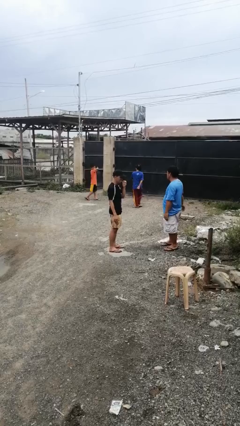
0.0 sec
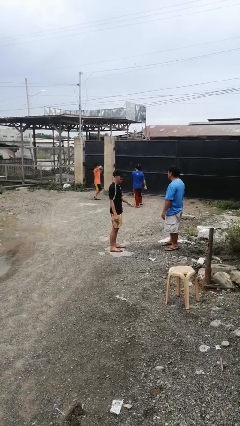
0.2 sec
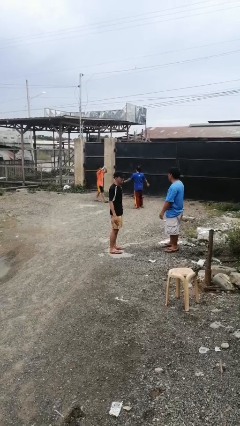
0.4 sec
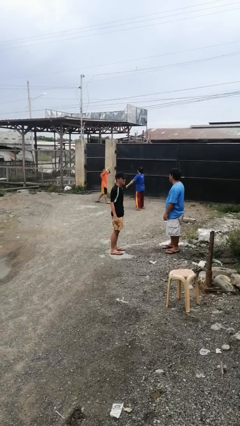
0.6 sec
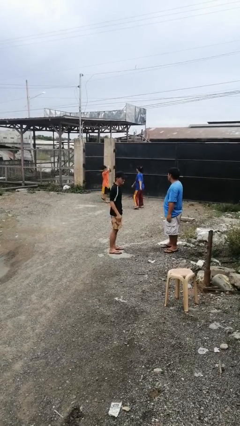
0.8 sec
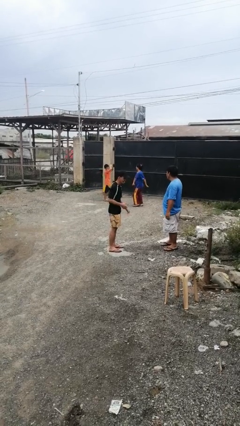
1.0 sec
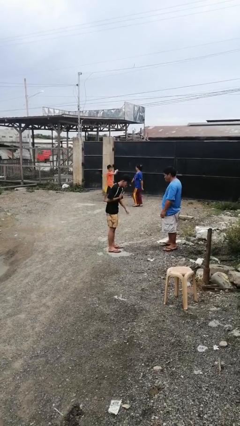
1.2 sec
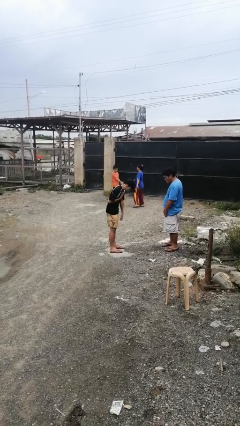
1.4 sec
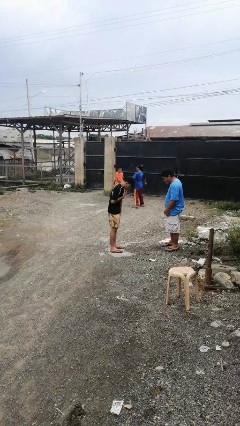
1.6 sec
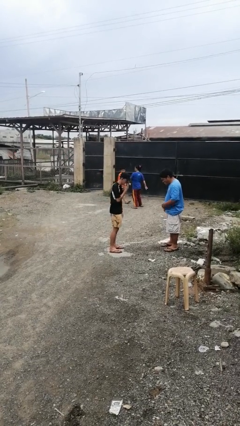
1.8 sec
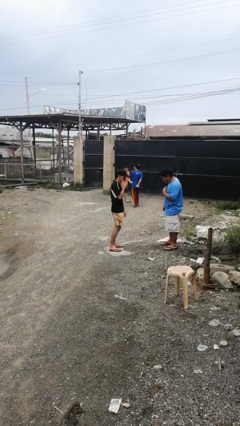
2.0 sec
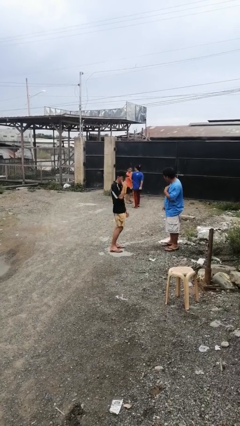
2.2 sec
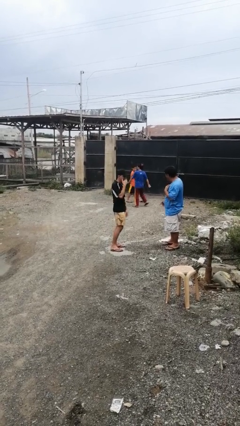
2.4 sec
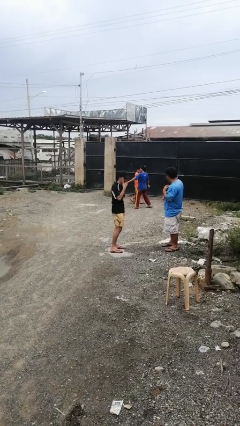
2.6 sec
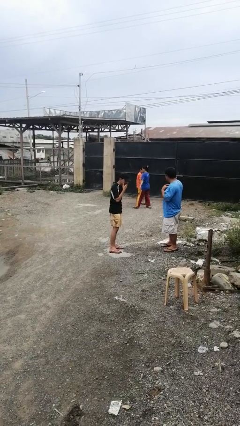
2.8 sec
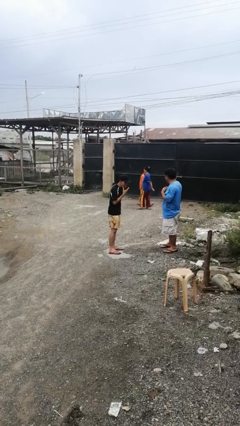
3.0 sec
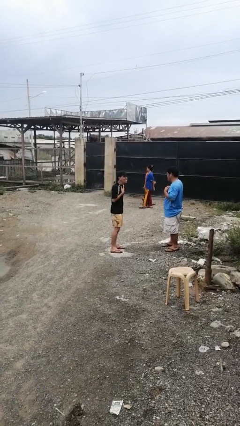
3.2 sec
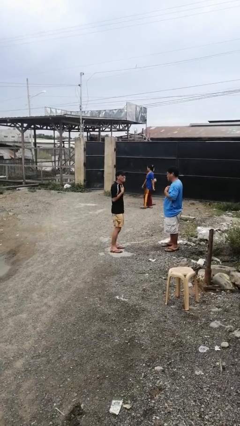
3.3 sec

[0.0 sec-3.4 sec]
person laughs with person

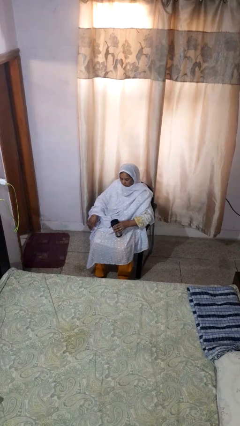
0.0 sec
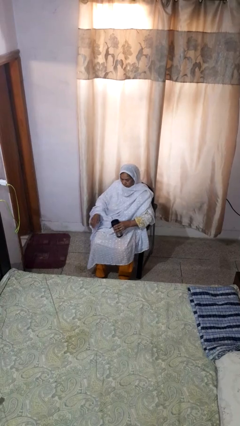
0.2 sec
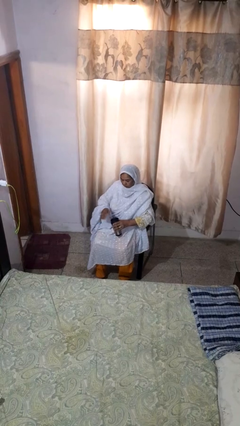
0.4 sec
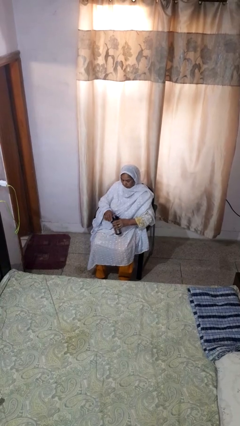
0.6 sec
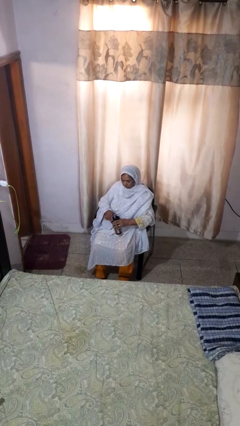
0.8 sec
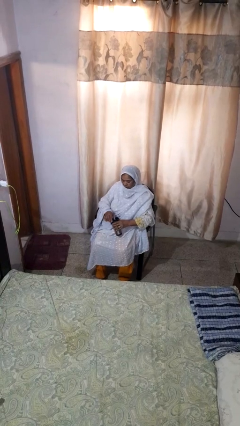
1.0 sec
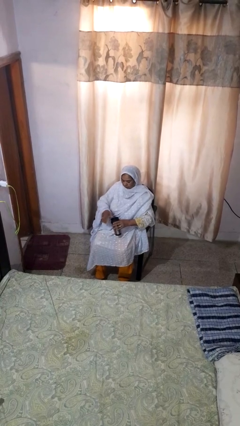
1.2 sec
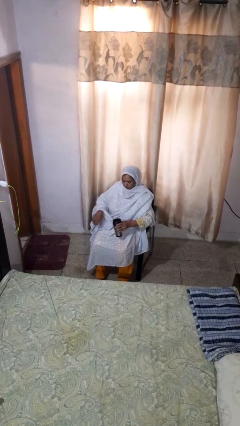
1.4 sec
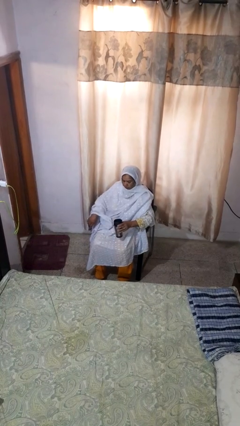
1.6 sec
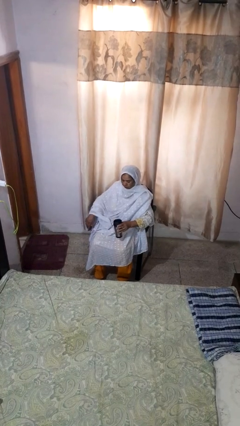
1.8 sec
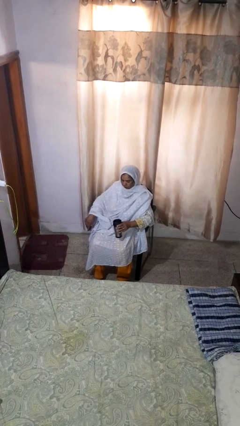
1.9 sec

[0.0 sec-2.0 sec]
person opens beverage can

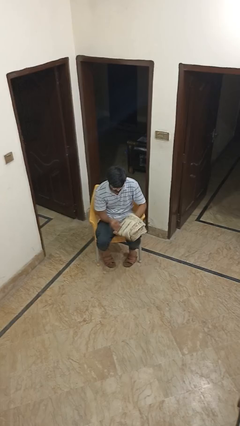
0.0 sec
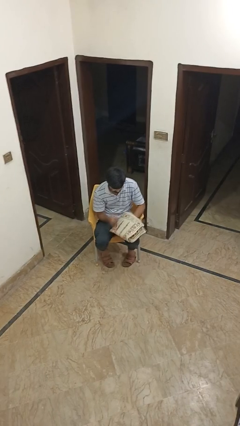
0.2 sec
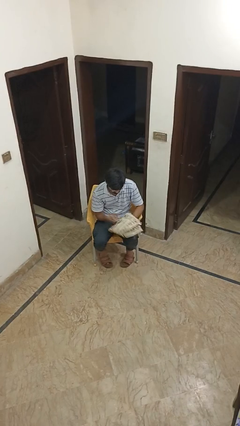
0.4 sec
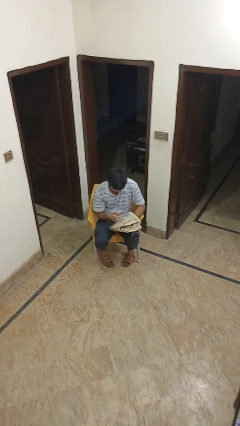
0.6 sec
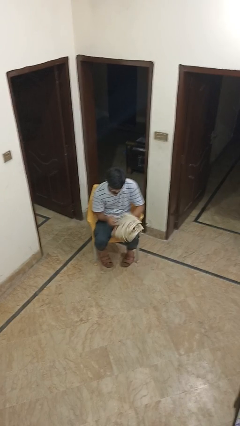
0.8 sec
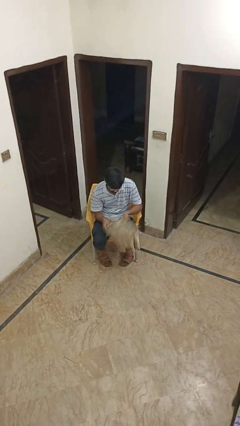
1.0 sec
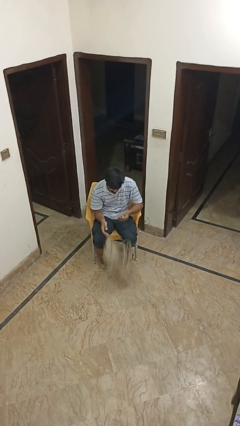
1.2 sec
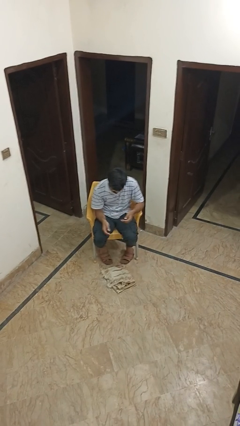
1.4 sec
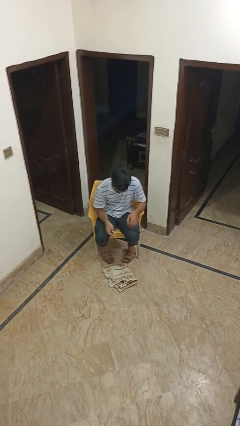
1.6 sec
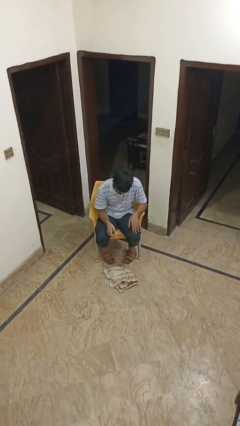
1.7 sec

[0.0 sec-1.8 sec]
person drops object

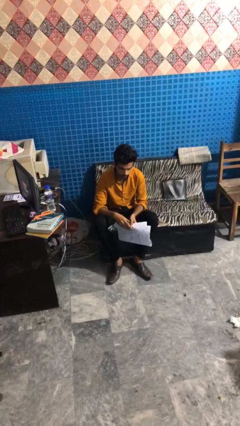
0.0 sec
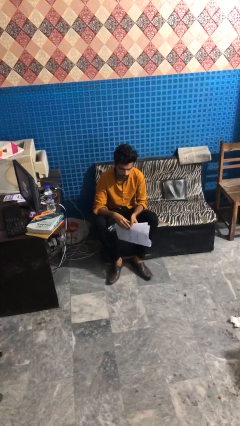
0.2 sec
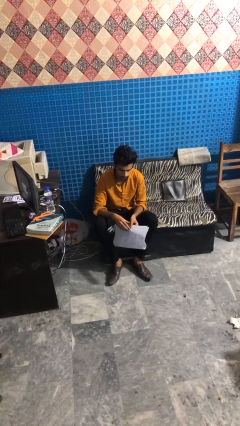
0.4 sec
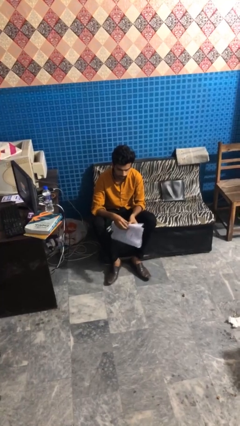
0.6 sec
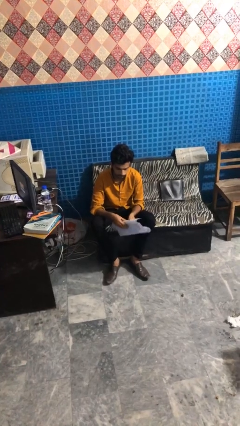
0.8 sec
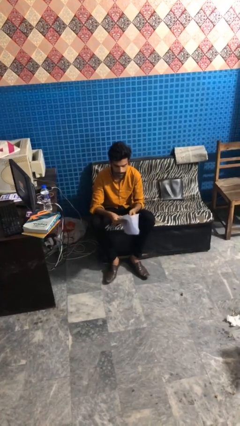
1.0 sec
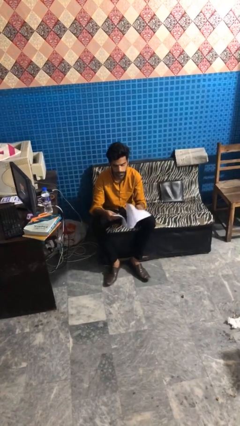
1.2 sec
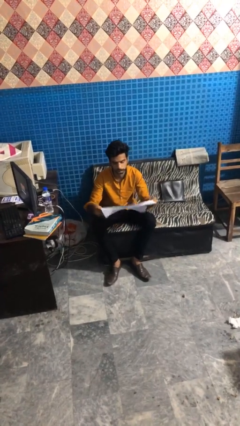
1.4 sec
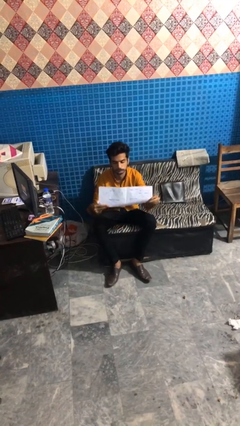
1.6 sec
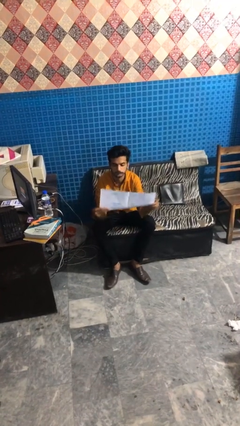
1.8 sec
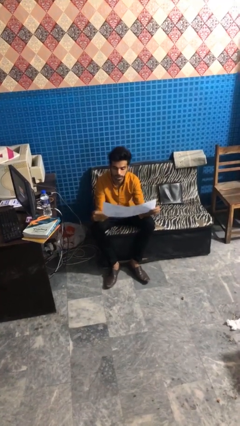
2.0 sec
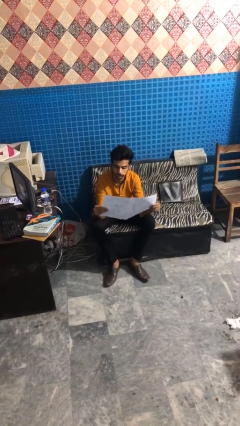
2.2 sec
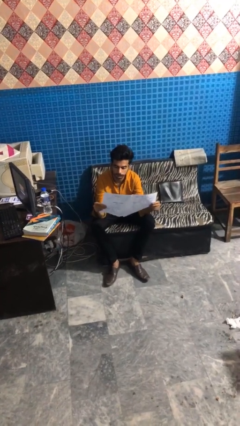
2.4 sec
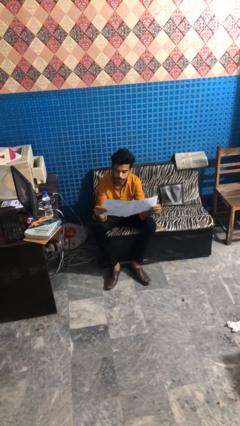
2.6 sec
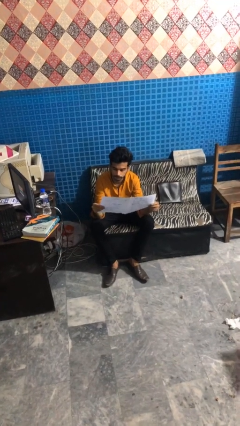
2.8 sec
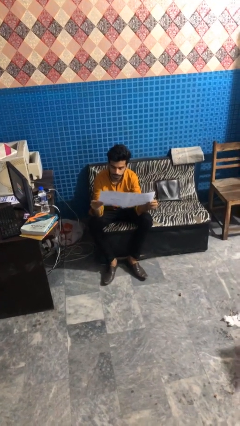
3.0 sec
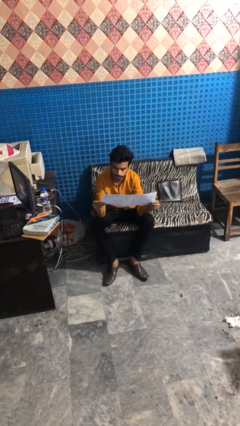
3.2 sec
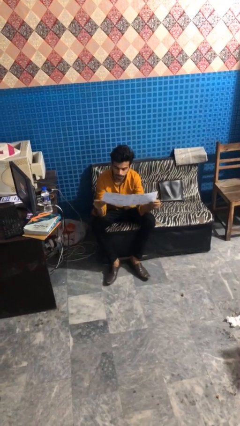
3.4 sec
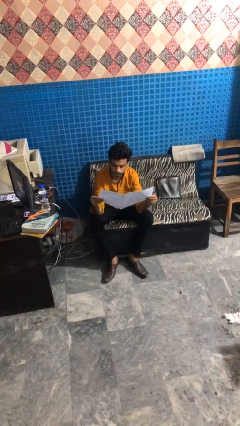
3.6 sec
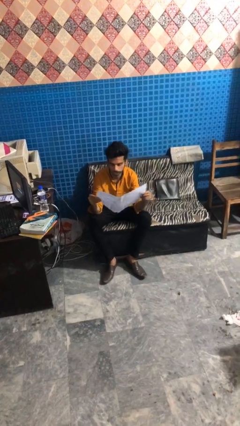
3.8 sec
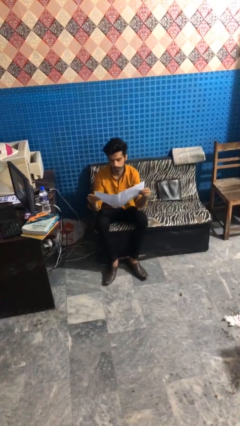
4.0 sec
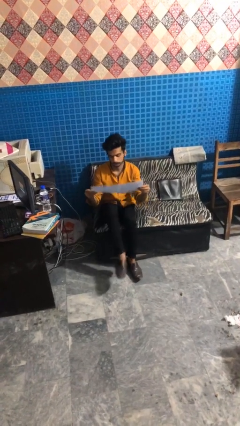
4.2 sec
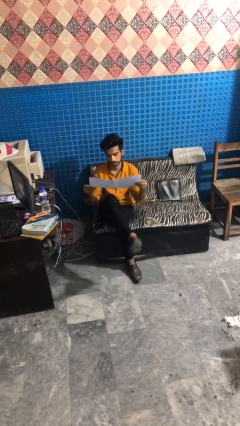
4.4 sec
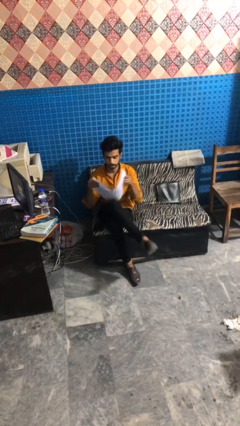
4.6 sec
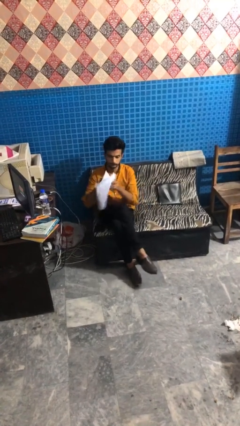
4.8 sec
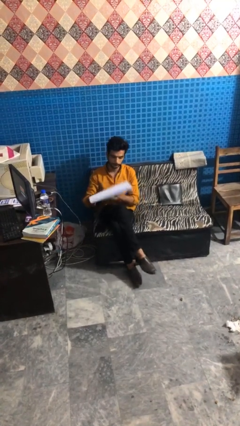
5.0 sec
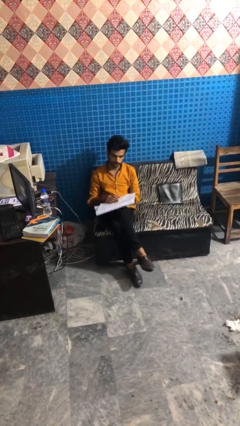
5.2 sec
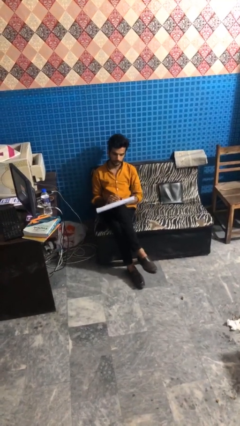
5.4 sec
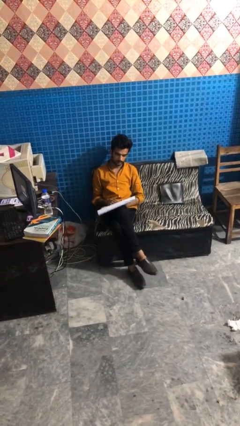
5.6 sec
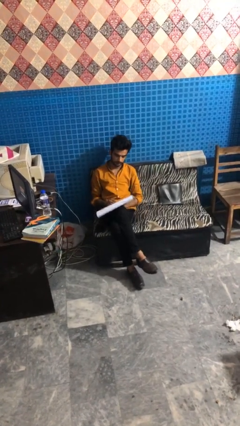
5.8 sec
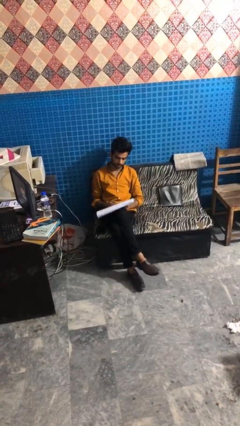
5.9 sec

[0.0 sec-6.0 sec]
person reads newspaper

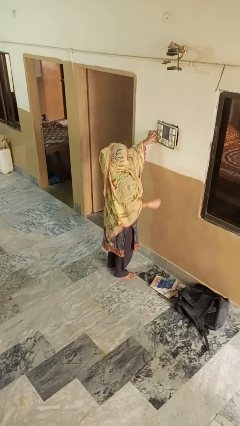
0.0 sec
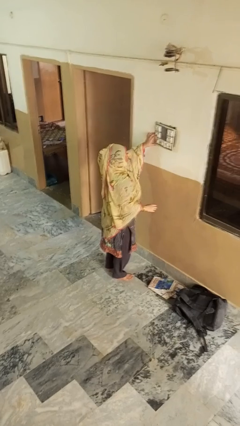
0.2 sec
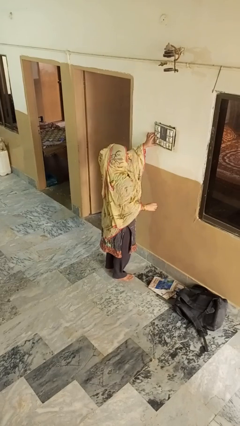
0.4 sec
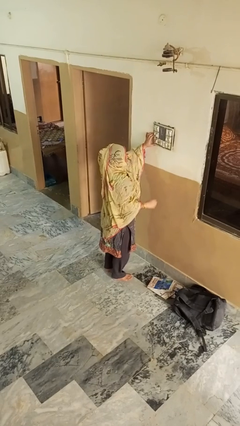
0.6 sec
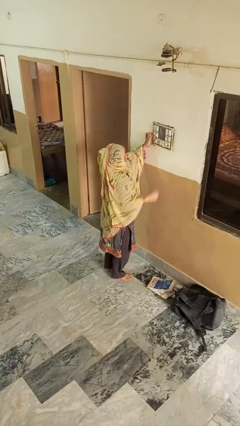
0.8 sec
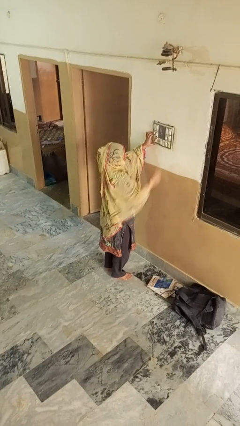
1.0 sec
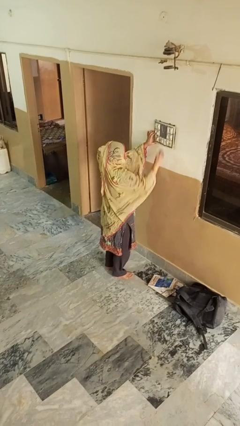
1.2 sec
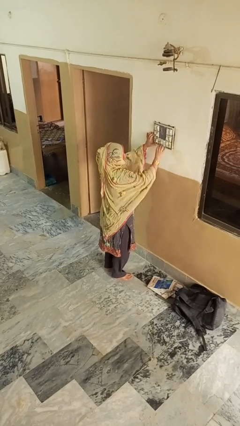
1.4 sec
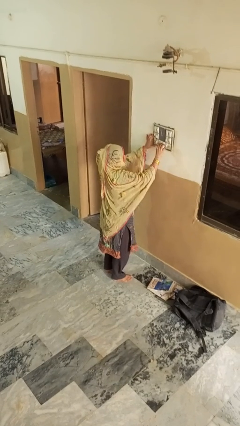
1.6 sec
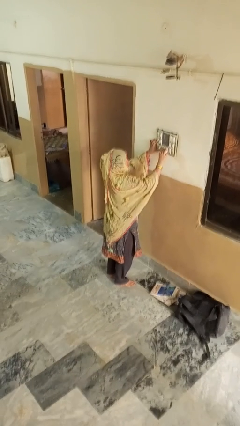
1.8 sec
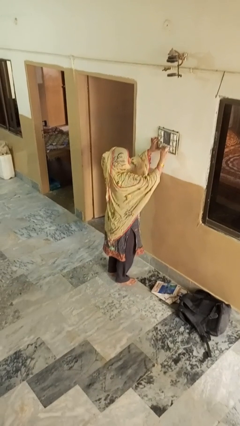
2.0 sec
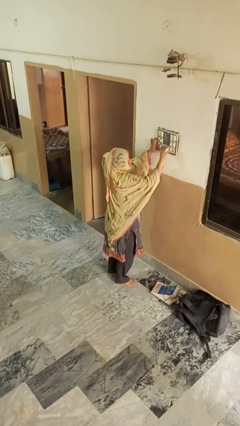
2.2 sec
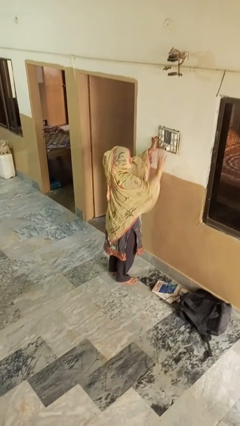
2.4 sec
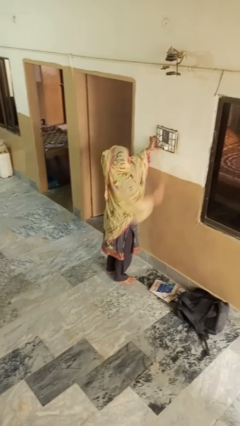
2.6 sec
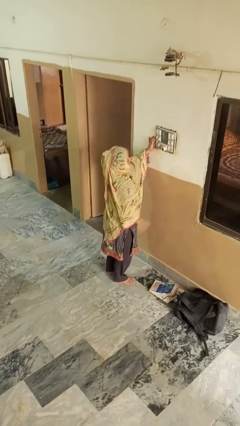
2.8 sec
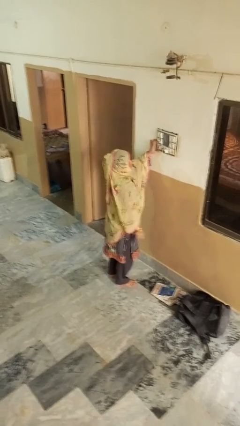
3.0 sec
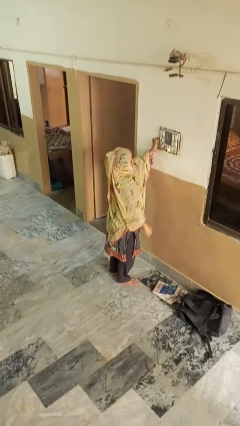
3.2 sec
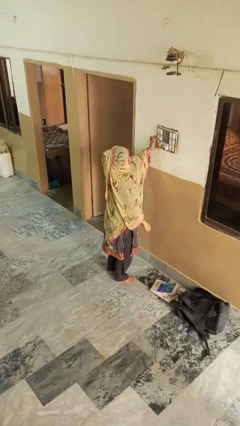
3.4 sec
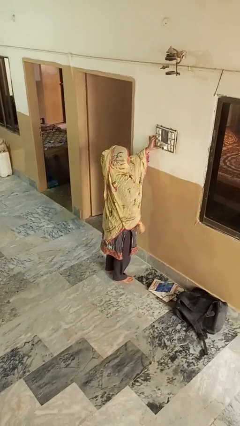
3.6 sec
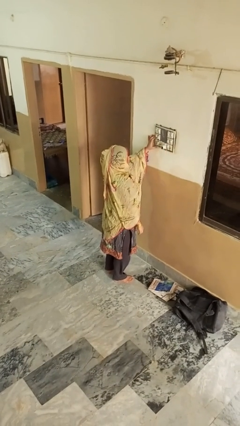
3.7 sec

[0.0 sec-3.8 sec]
person plugs into electrical socket

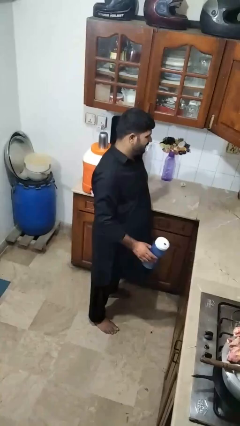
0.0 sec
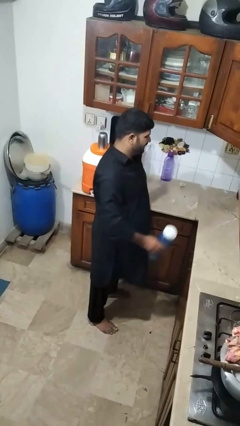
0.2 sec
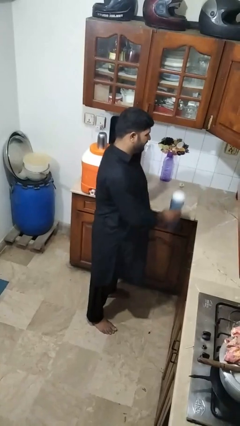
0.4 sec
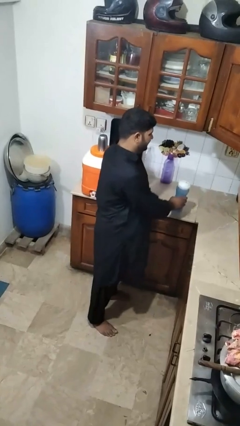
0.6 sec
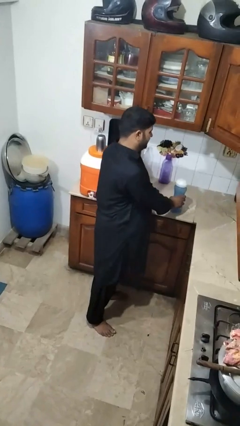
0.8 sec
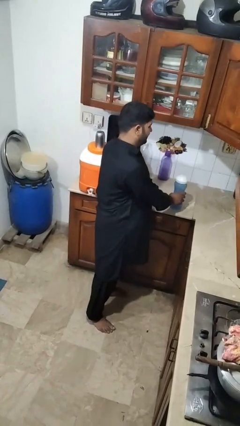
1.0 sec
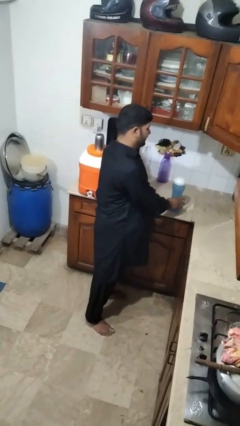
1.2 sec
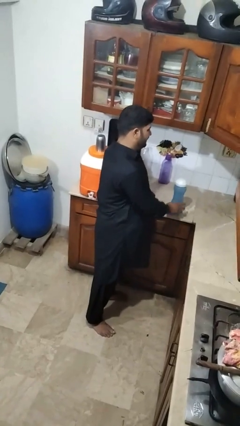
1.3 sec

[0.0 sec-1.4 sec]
person puts down object on countertop
